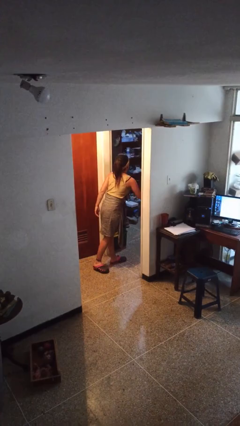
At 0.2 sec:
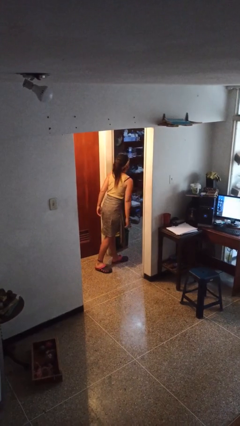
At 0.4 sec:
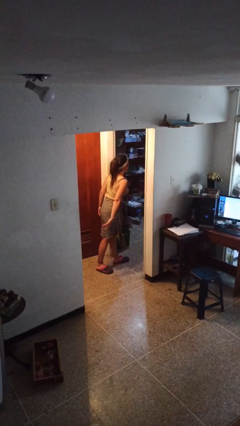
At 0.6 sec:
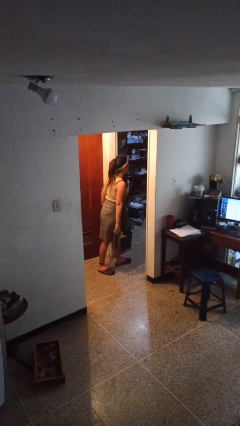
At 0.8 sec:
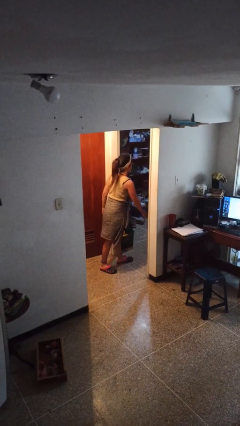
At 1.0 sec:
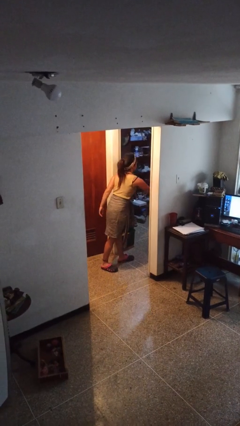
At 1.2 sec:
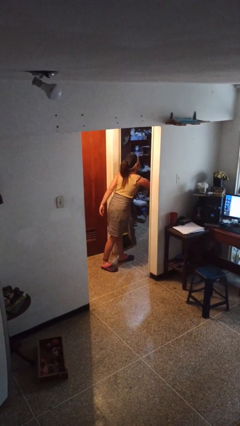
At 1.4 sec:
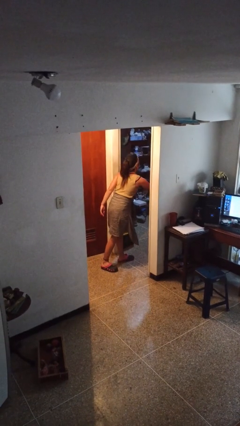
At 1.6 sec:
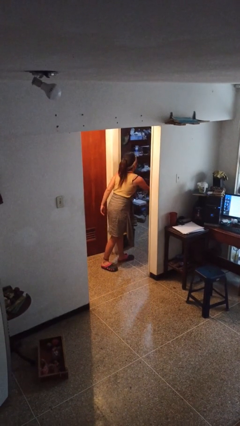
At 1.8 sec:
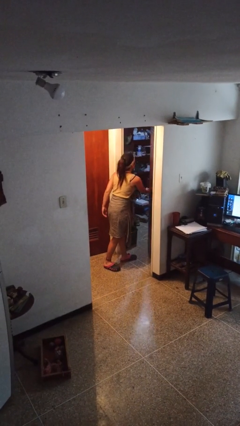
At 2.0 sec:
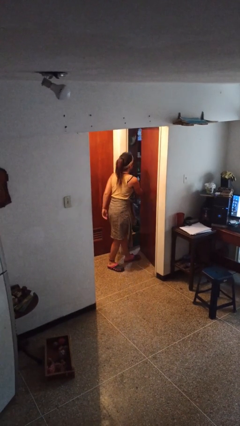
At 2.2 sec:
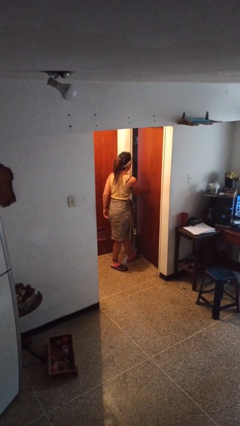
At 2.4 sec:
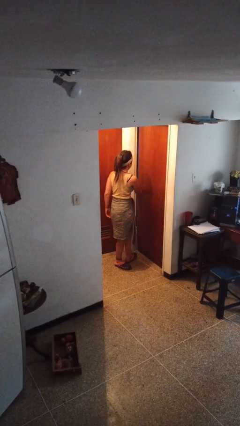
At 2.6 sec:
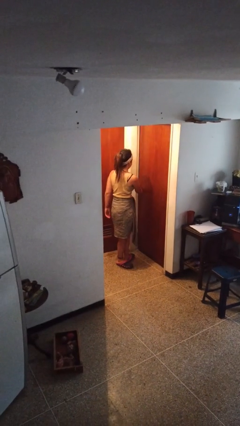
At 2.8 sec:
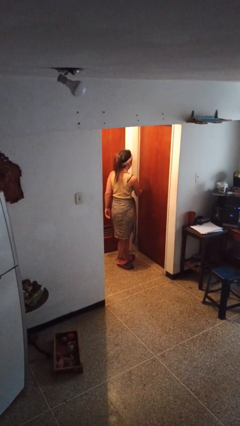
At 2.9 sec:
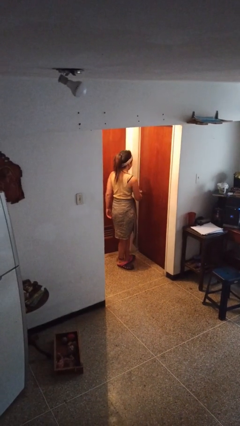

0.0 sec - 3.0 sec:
person closes facility door

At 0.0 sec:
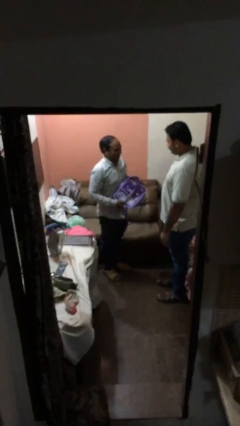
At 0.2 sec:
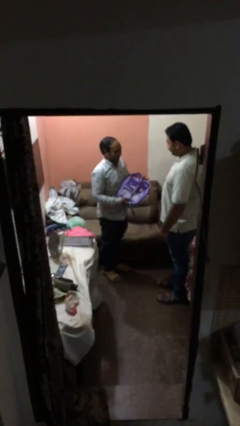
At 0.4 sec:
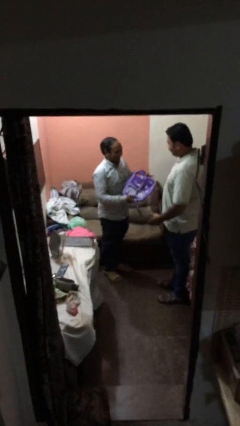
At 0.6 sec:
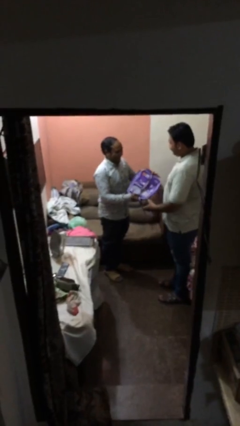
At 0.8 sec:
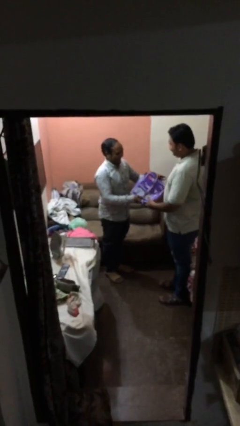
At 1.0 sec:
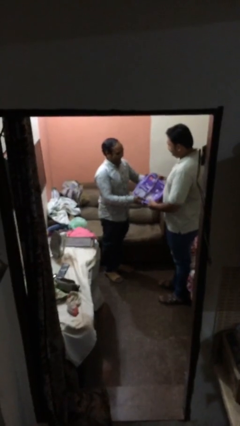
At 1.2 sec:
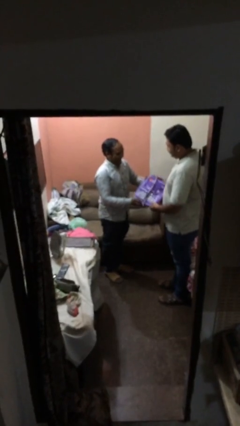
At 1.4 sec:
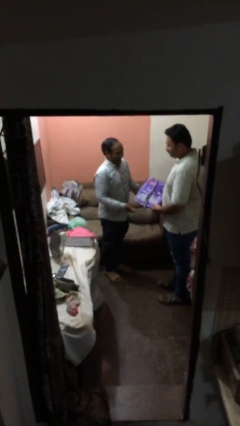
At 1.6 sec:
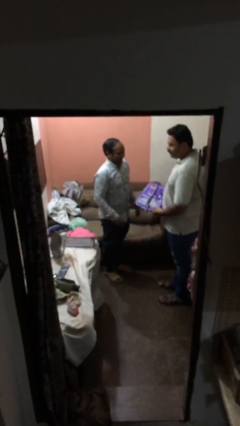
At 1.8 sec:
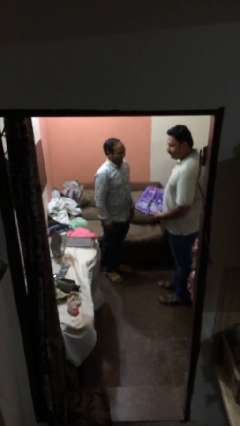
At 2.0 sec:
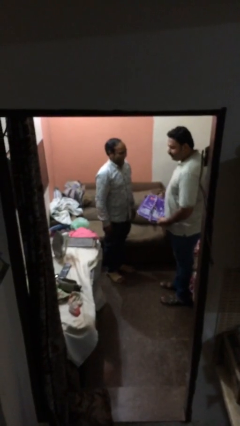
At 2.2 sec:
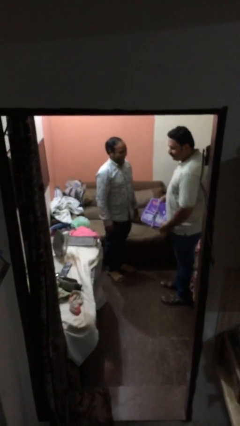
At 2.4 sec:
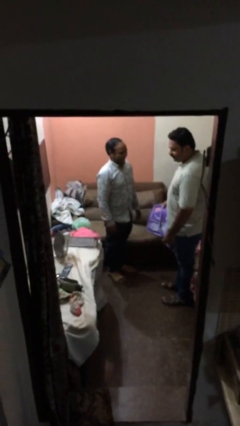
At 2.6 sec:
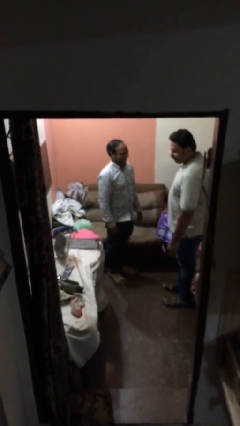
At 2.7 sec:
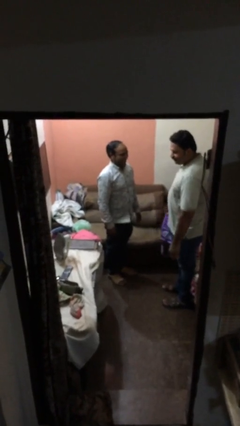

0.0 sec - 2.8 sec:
person transfers object to person

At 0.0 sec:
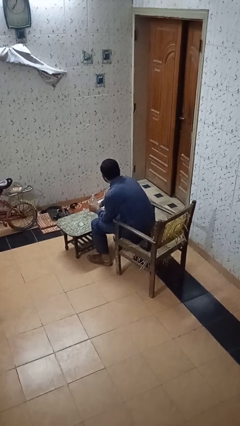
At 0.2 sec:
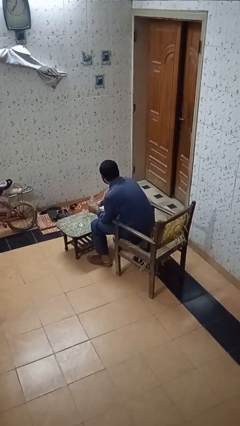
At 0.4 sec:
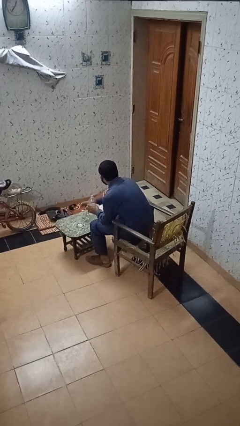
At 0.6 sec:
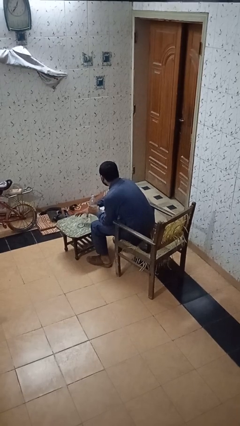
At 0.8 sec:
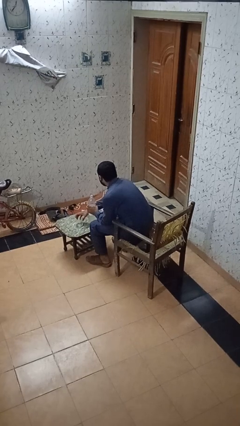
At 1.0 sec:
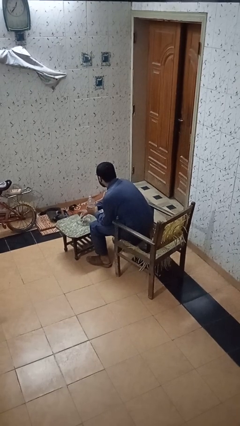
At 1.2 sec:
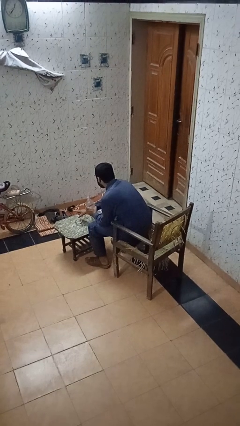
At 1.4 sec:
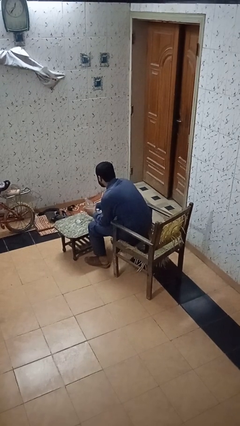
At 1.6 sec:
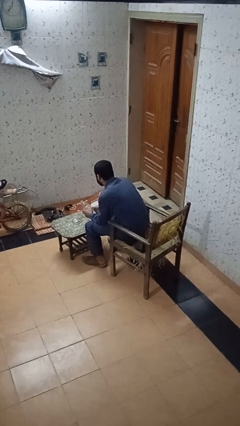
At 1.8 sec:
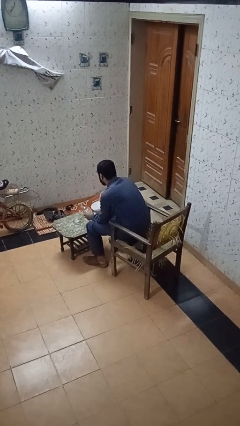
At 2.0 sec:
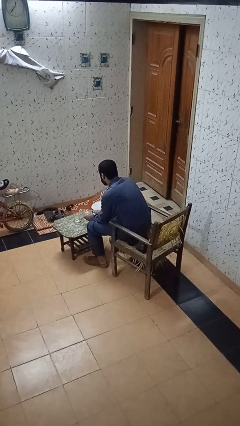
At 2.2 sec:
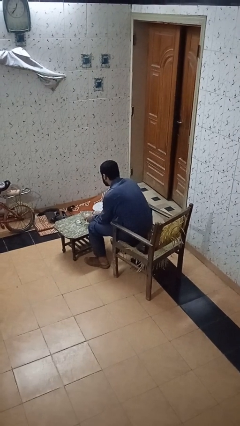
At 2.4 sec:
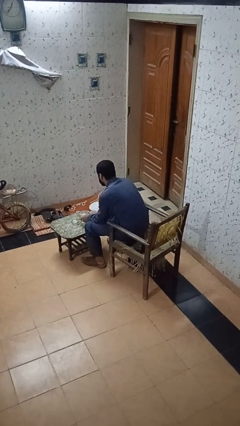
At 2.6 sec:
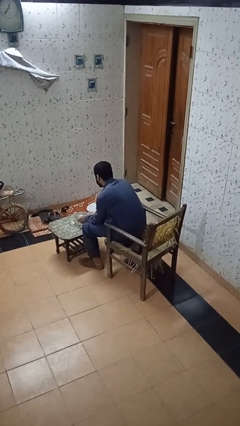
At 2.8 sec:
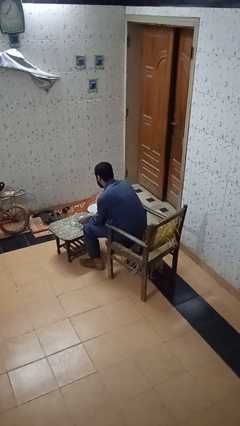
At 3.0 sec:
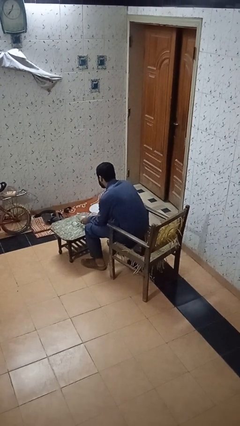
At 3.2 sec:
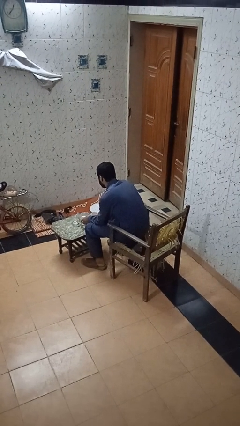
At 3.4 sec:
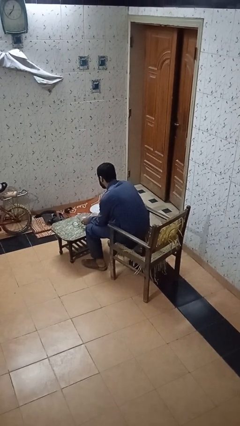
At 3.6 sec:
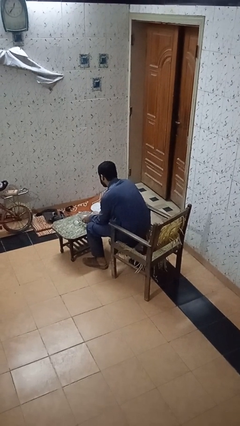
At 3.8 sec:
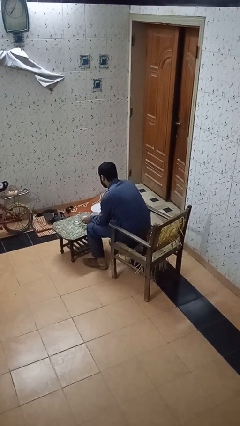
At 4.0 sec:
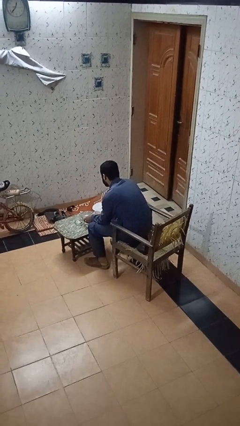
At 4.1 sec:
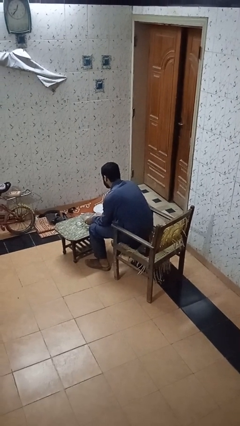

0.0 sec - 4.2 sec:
person pours liquid into cup

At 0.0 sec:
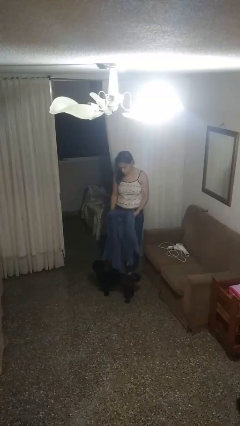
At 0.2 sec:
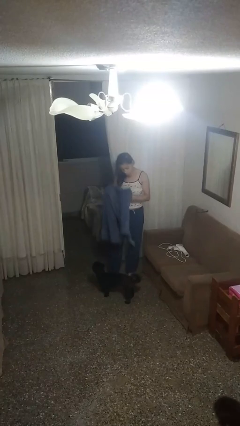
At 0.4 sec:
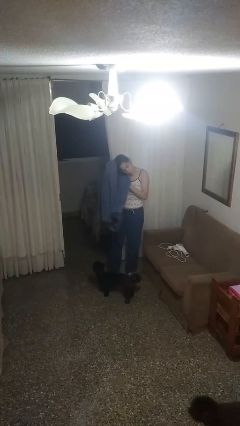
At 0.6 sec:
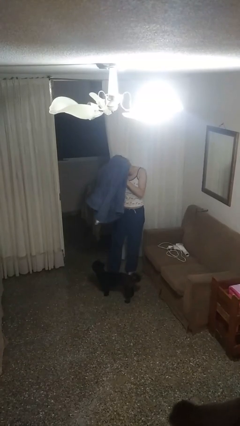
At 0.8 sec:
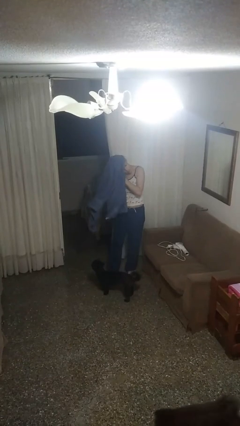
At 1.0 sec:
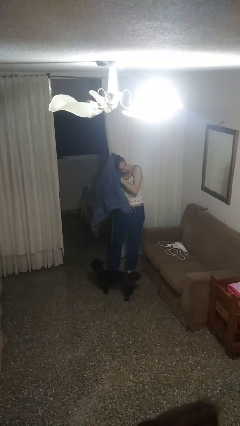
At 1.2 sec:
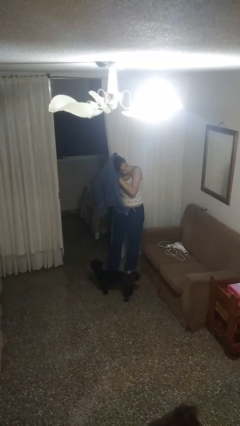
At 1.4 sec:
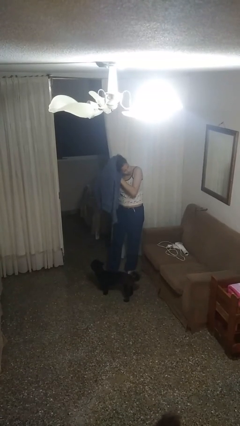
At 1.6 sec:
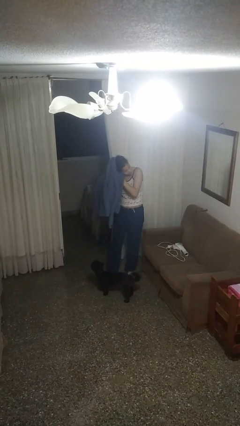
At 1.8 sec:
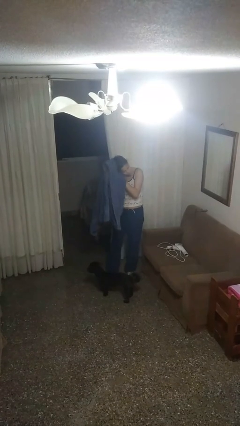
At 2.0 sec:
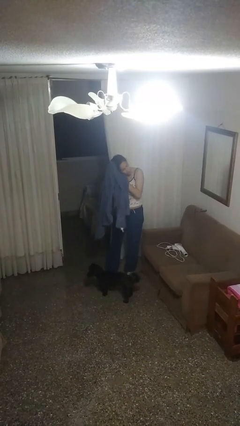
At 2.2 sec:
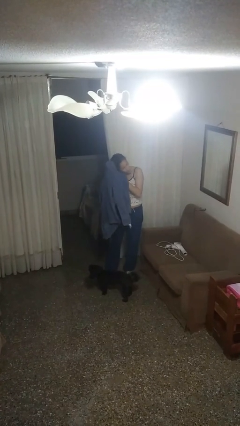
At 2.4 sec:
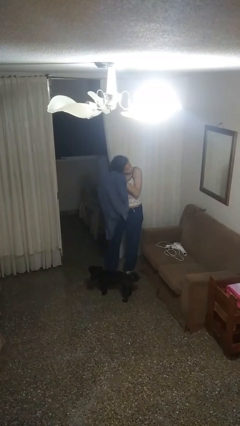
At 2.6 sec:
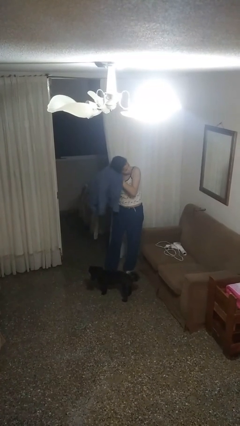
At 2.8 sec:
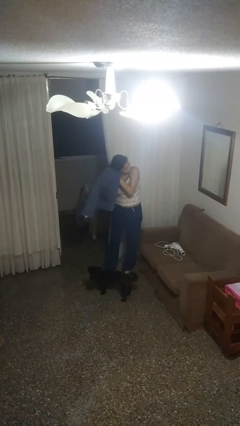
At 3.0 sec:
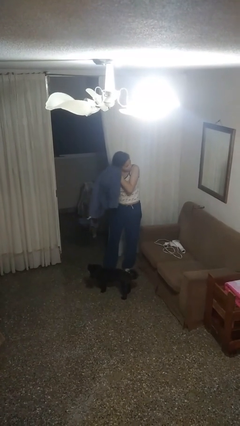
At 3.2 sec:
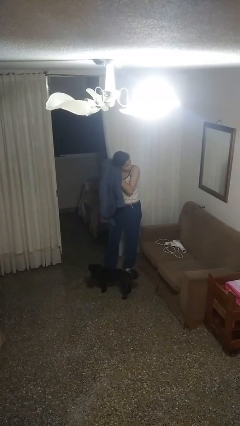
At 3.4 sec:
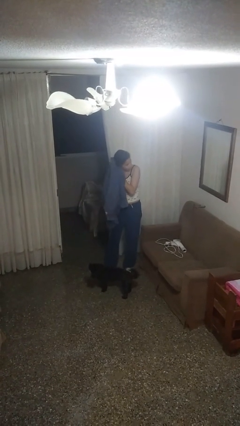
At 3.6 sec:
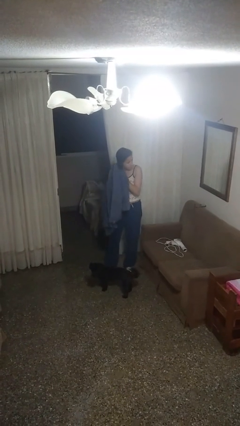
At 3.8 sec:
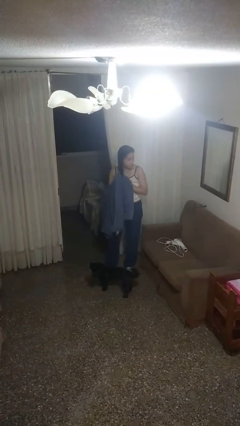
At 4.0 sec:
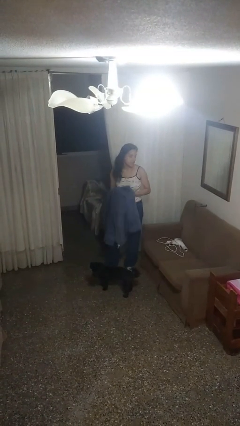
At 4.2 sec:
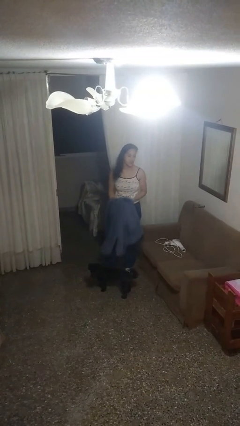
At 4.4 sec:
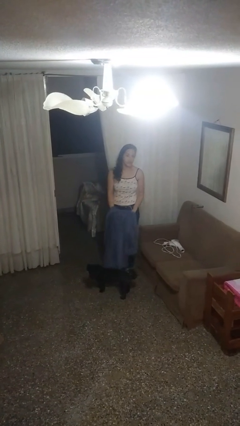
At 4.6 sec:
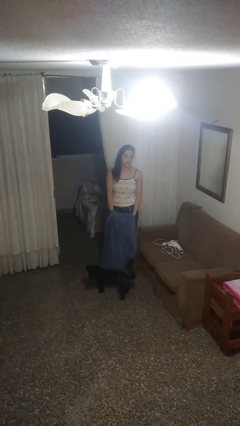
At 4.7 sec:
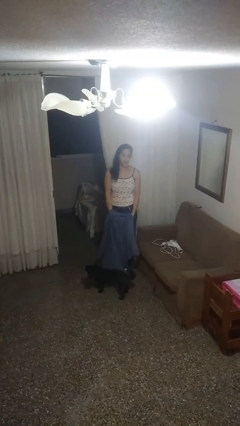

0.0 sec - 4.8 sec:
person dries hair with towel

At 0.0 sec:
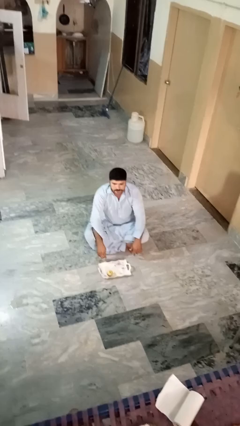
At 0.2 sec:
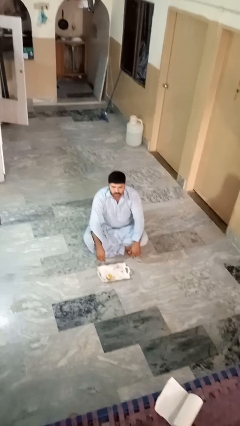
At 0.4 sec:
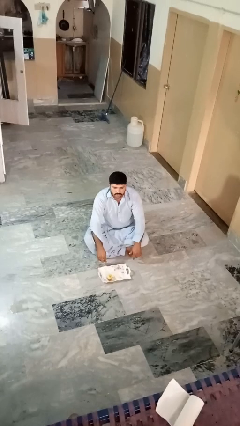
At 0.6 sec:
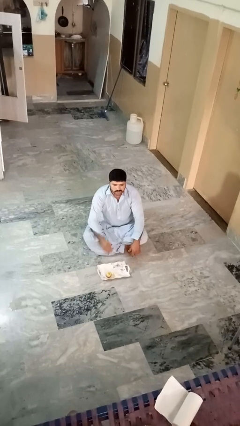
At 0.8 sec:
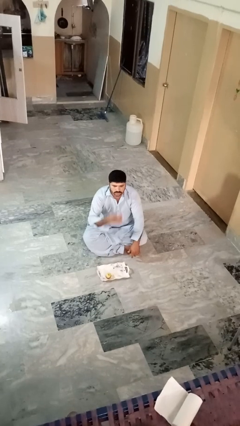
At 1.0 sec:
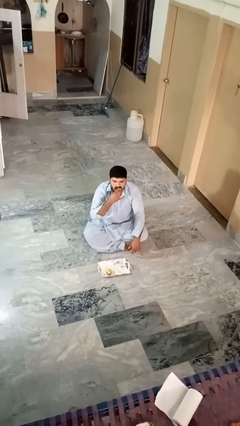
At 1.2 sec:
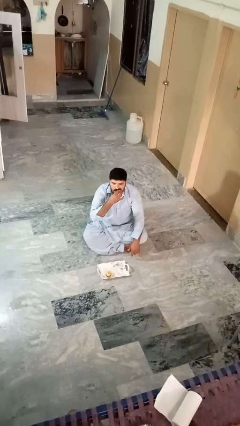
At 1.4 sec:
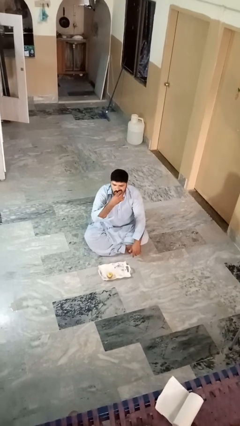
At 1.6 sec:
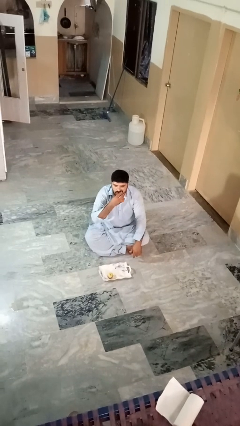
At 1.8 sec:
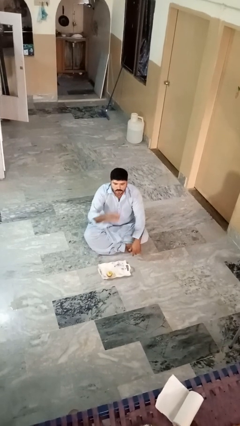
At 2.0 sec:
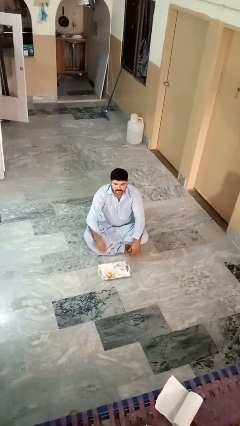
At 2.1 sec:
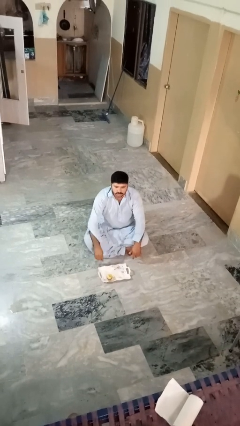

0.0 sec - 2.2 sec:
person eats apple
